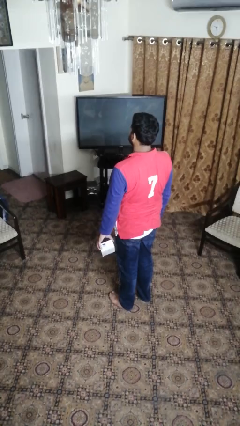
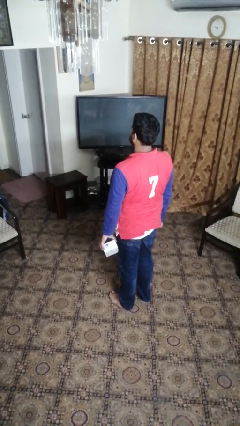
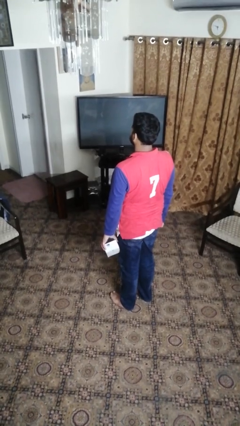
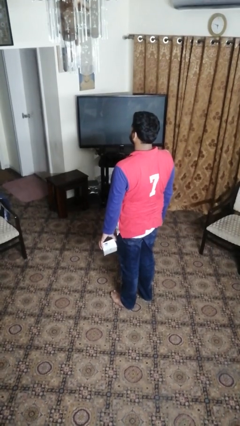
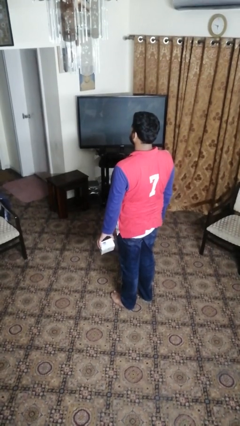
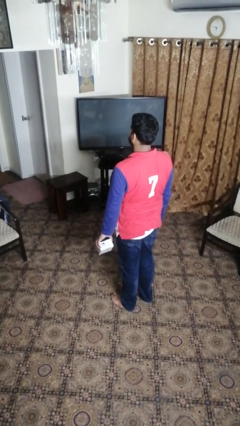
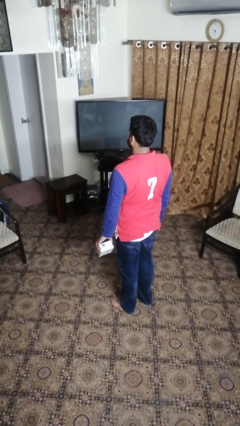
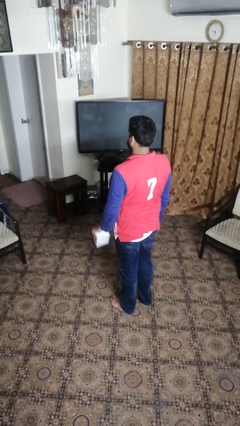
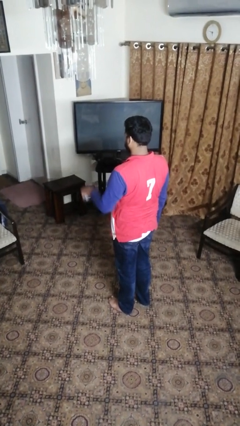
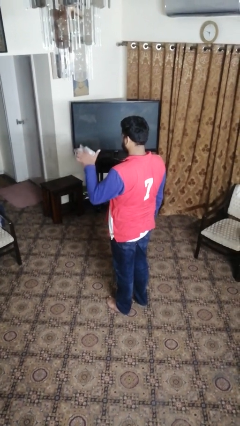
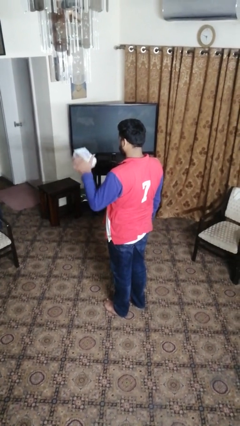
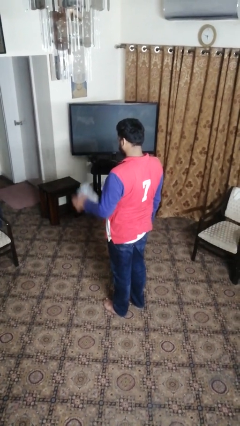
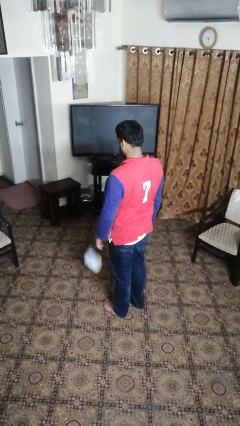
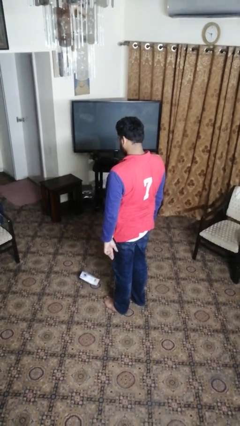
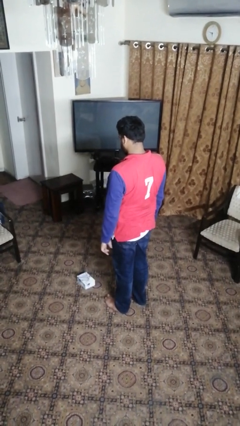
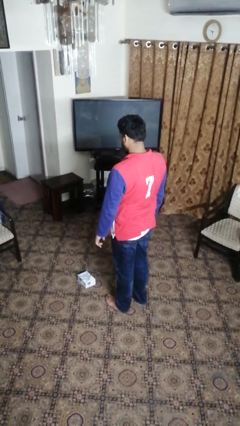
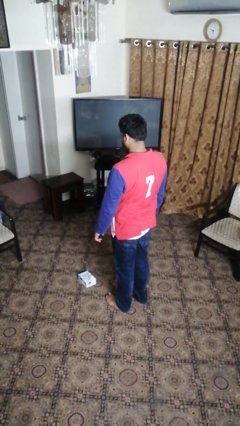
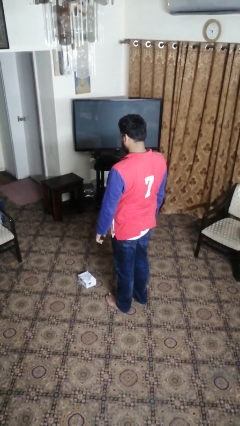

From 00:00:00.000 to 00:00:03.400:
person throws object into air

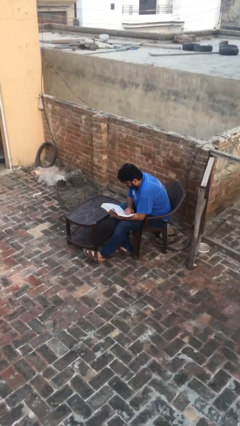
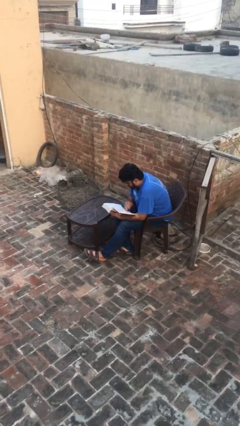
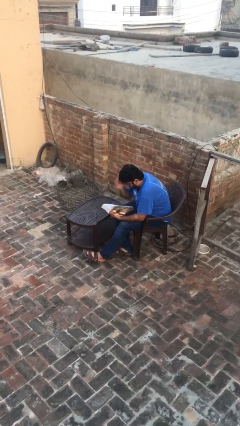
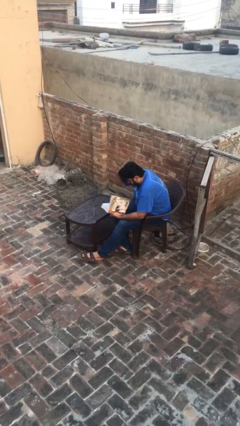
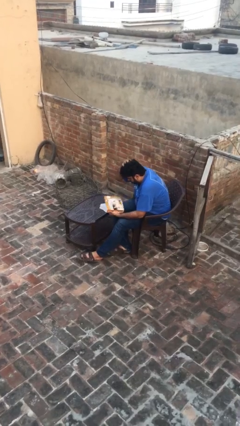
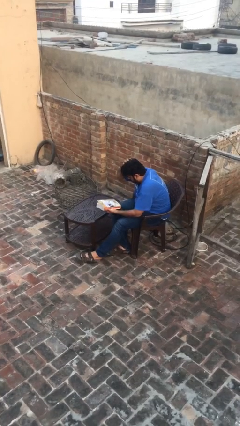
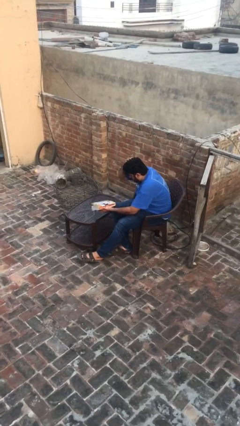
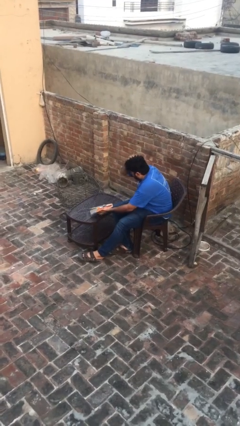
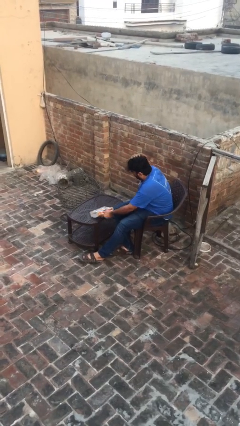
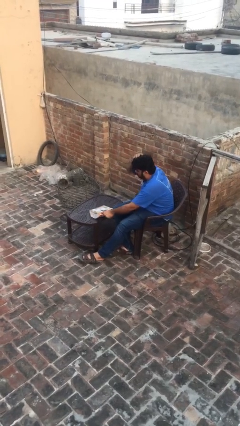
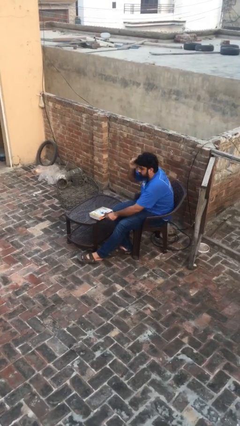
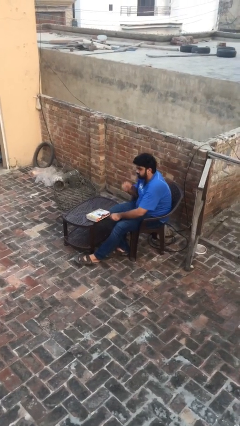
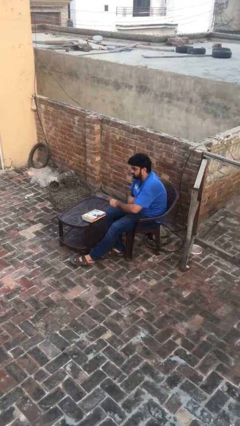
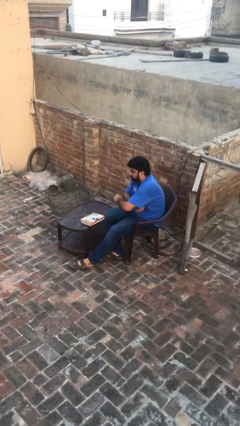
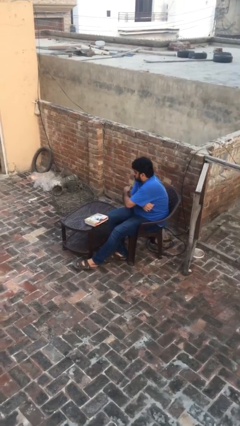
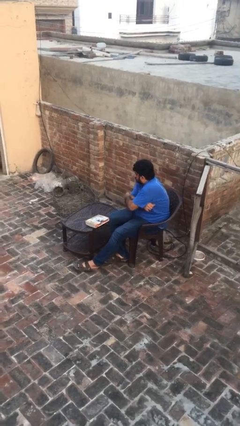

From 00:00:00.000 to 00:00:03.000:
person puts down object on table

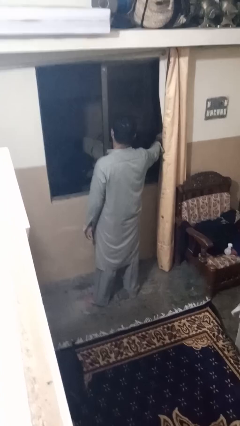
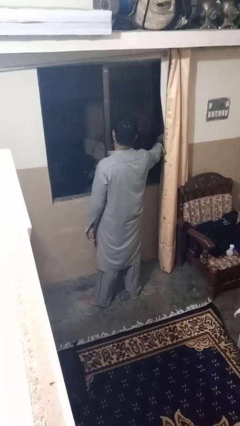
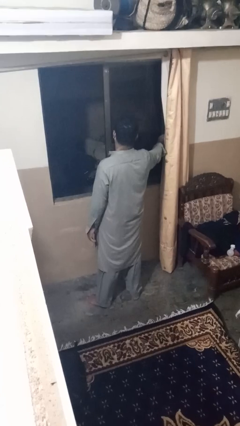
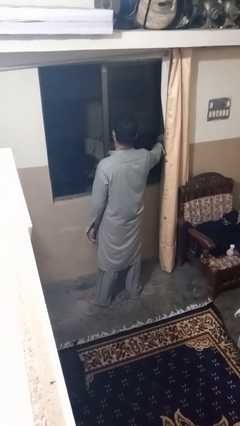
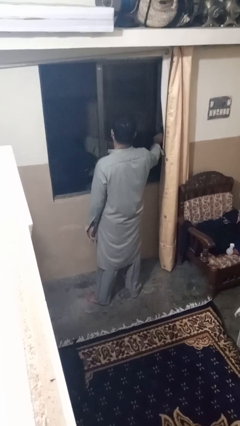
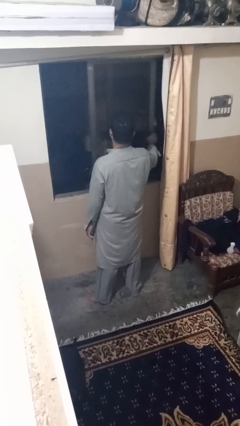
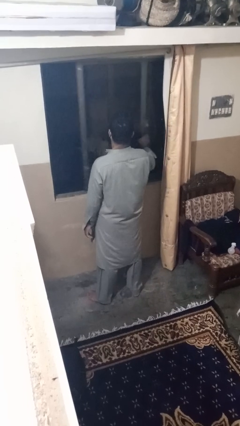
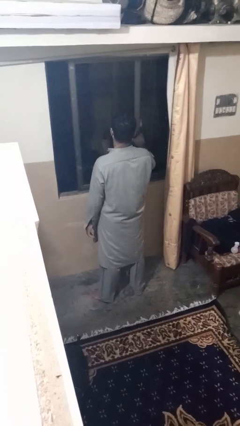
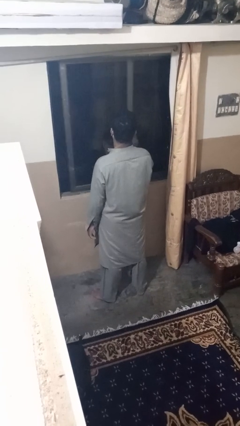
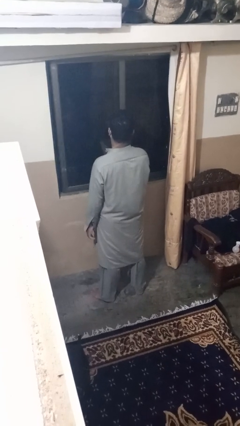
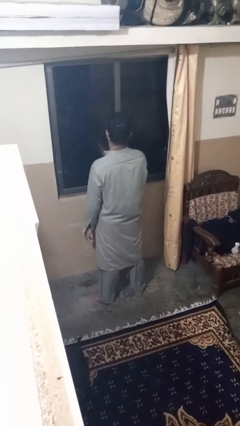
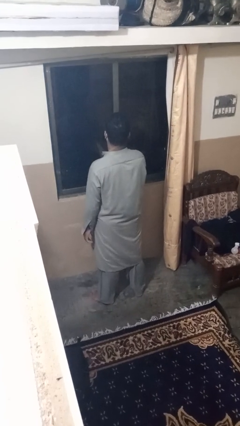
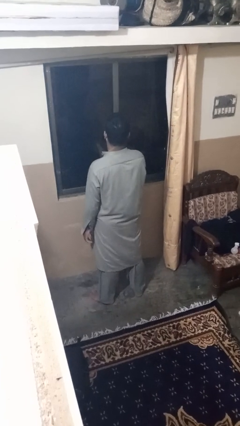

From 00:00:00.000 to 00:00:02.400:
person closes home window

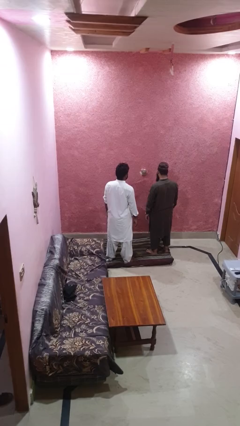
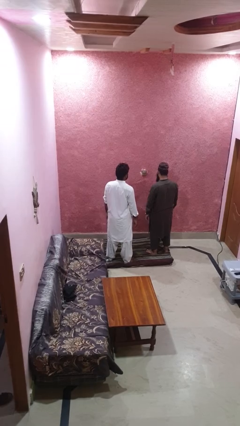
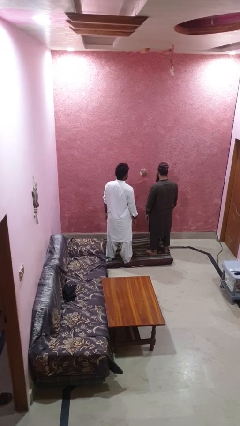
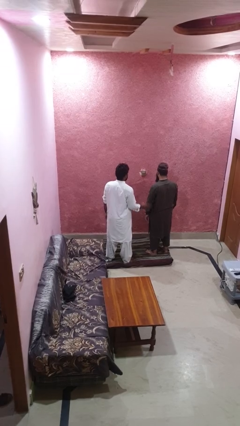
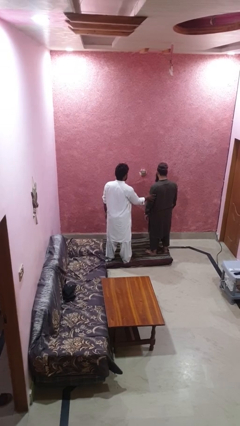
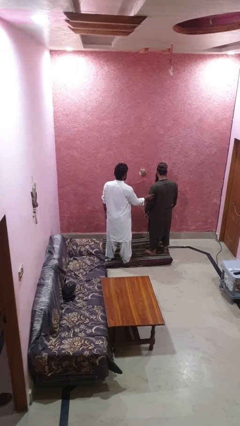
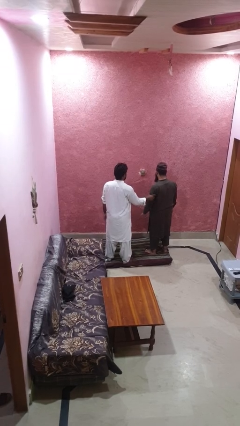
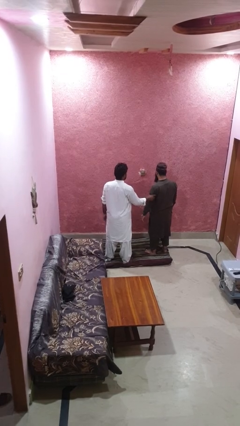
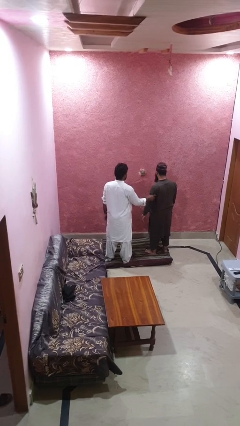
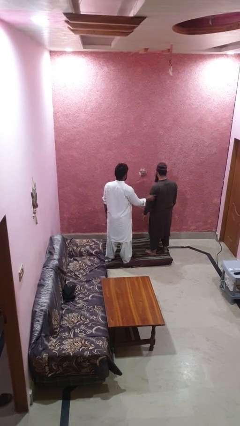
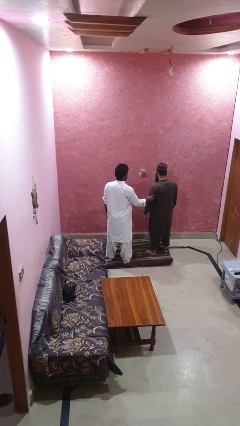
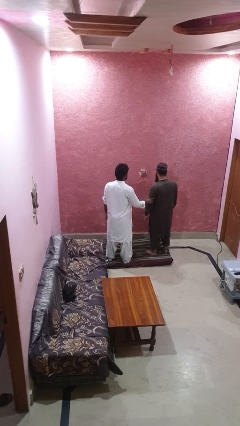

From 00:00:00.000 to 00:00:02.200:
person grabs person by bicep

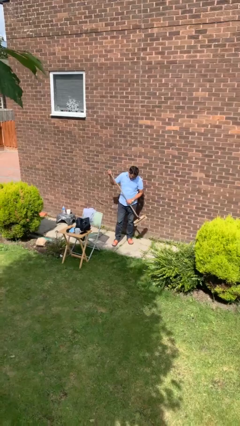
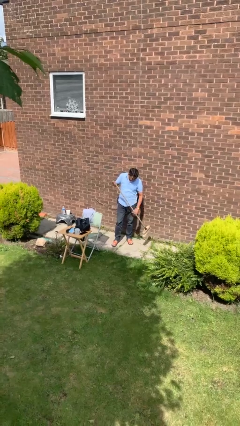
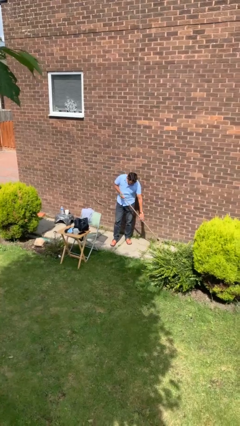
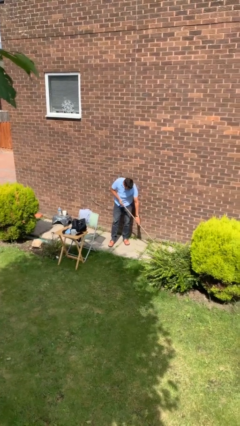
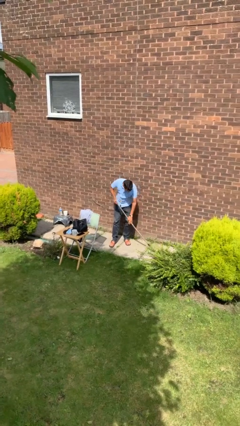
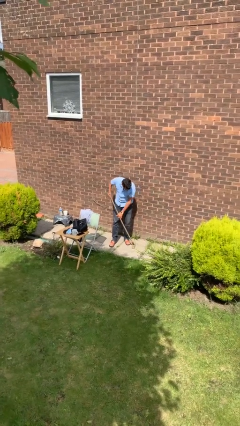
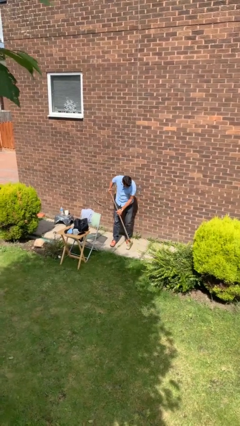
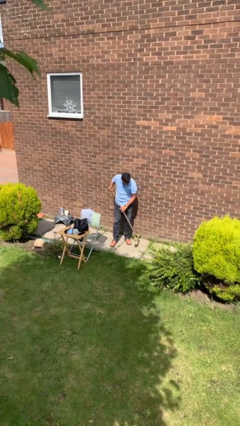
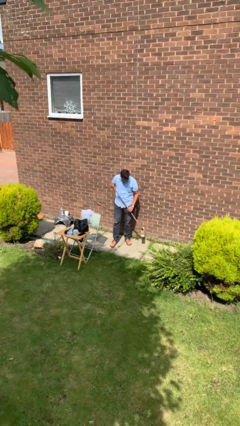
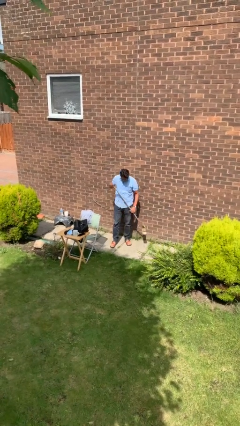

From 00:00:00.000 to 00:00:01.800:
person sweeps floor

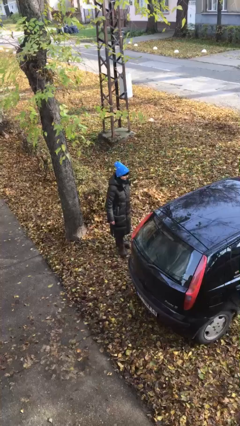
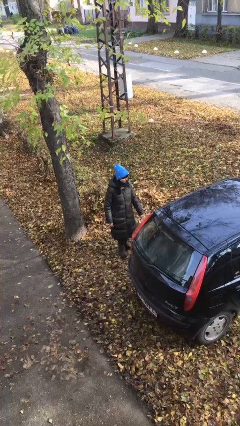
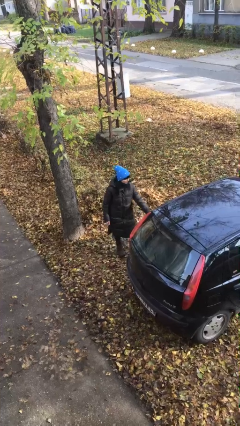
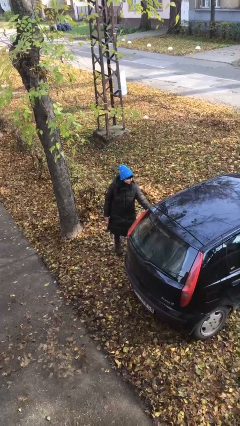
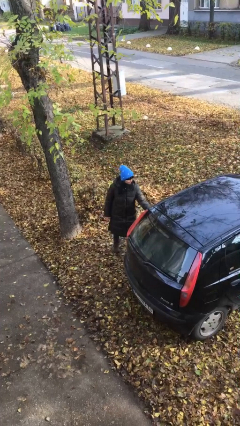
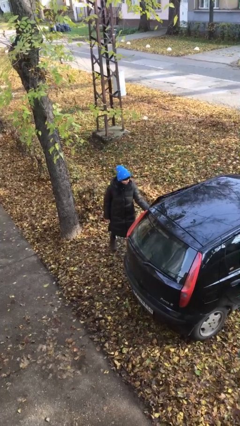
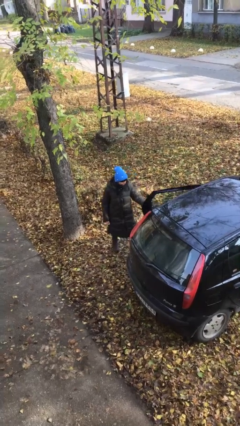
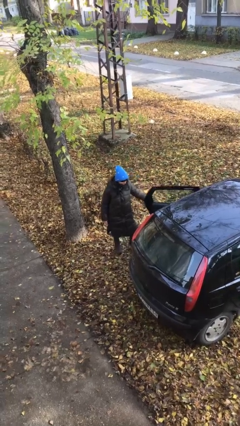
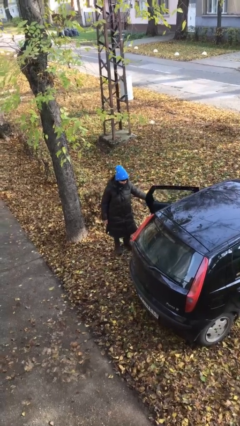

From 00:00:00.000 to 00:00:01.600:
person opens car door

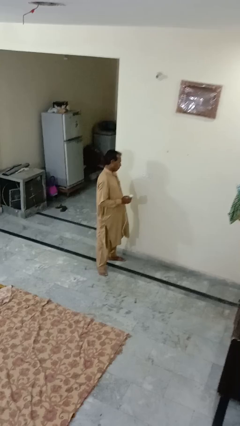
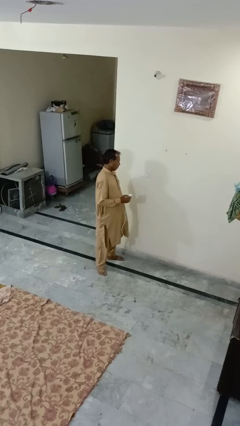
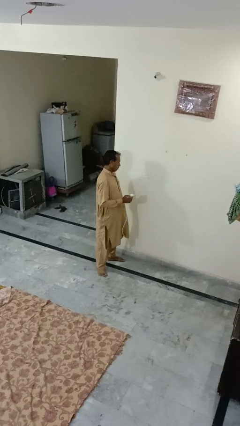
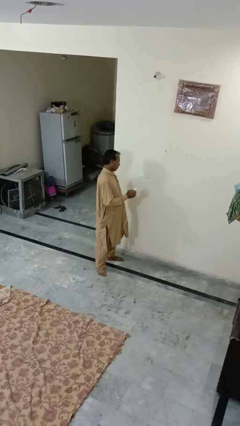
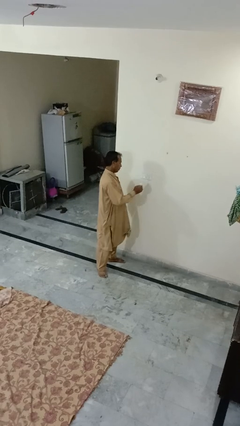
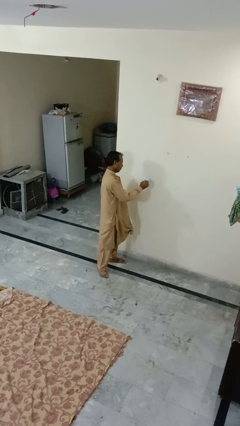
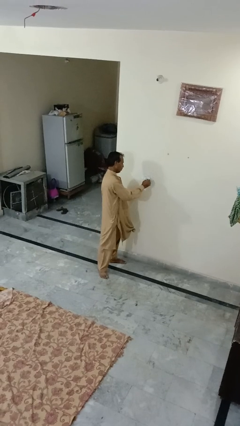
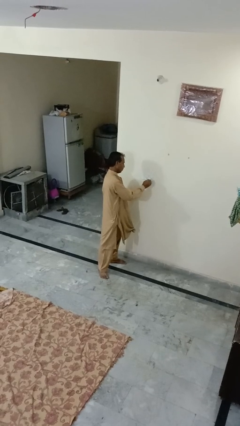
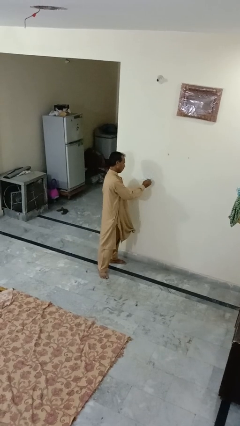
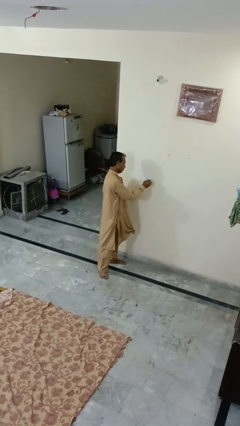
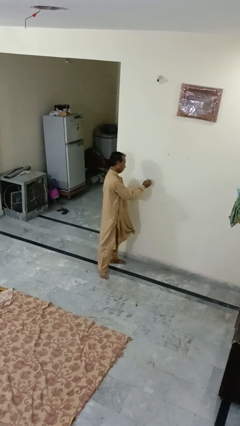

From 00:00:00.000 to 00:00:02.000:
person plugs into electrical socket

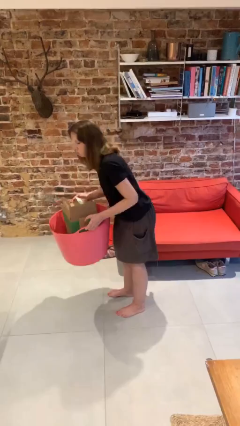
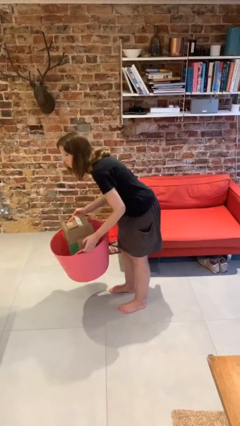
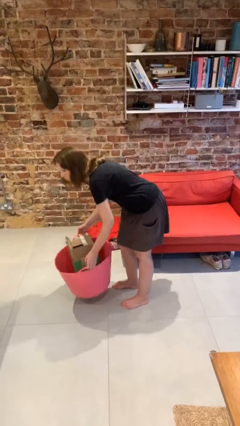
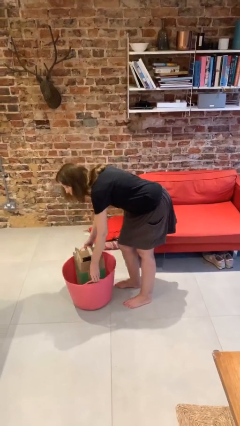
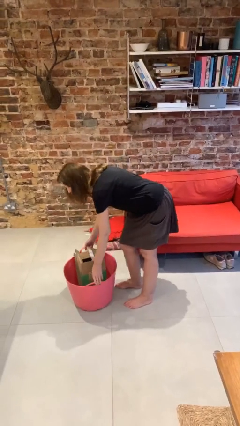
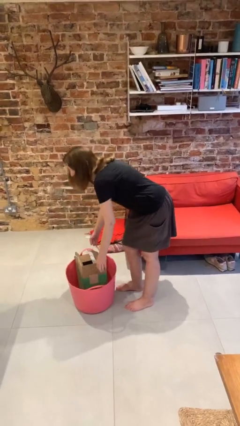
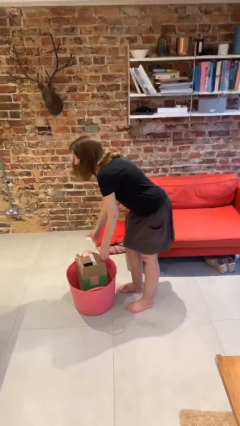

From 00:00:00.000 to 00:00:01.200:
person puts down object on floor
